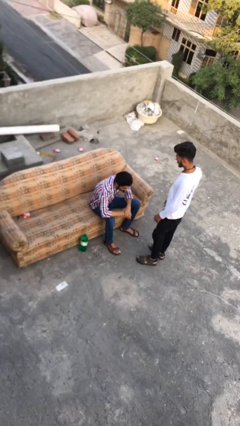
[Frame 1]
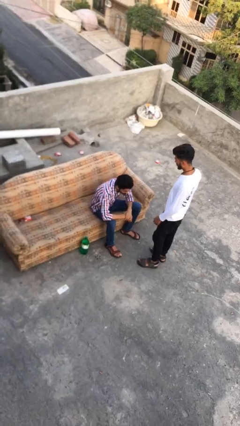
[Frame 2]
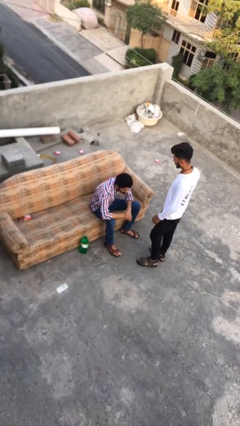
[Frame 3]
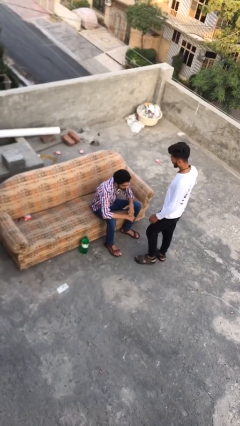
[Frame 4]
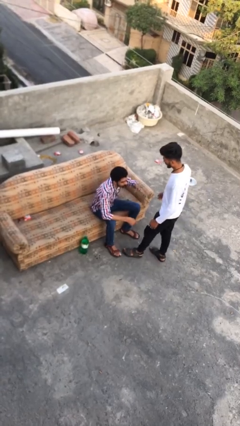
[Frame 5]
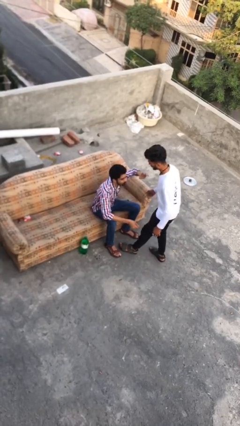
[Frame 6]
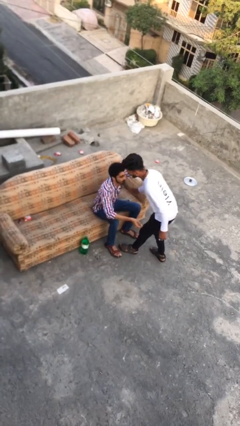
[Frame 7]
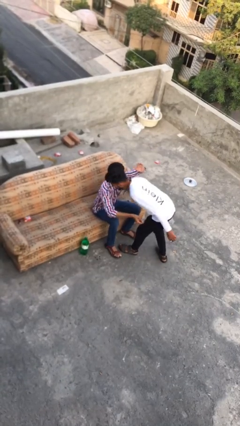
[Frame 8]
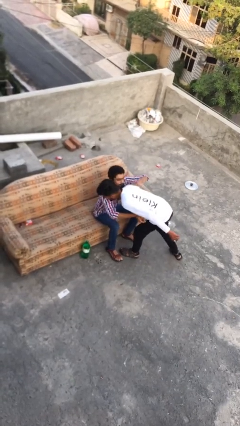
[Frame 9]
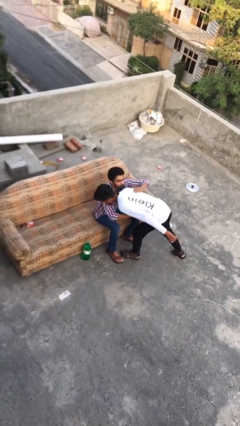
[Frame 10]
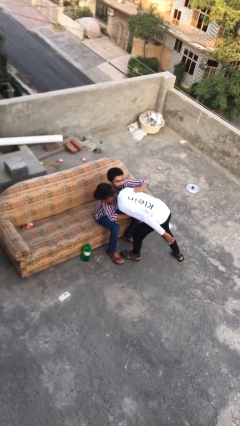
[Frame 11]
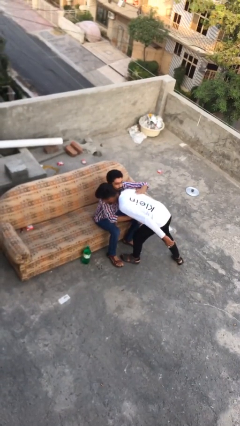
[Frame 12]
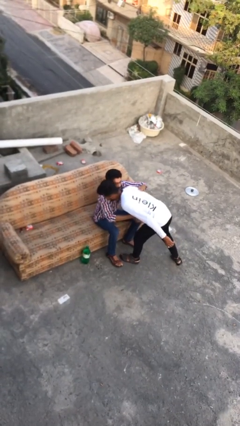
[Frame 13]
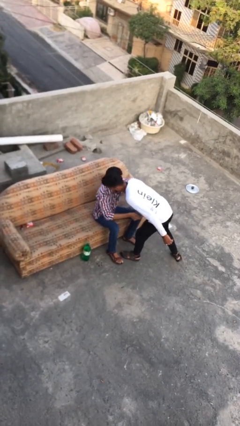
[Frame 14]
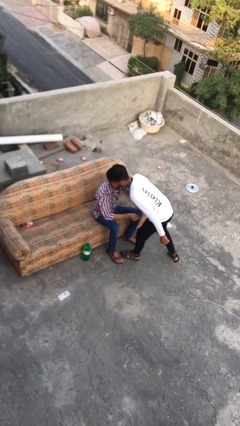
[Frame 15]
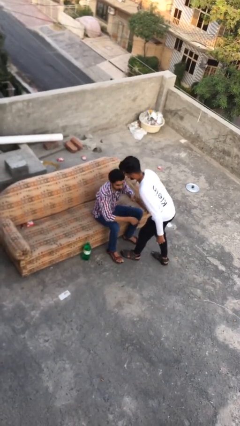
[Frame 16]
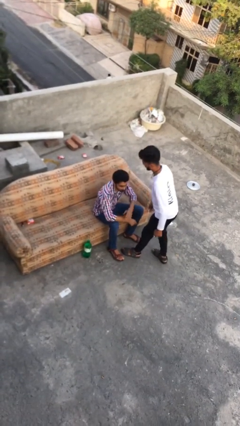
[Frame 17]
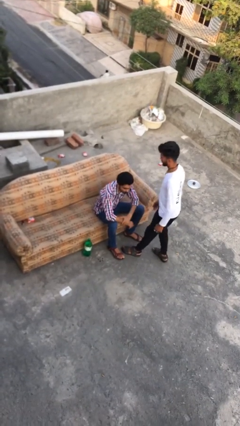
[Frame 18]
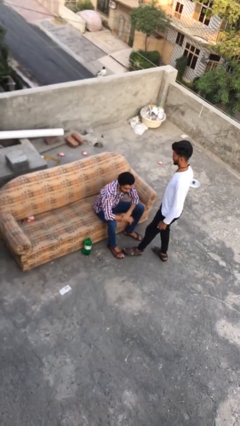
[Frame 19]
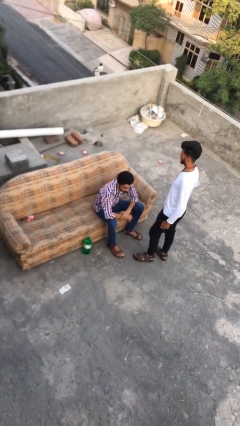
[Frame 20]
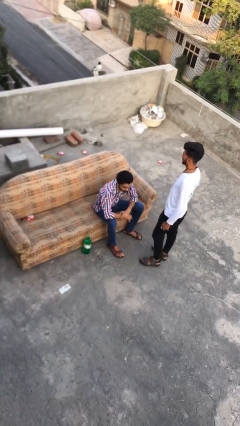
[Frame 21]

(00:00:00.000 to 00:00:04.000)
person embraces person

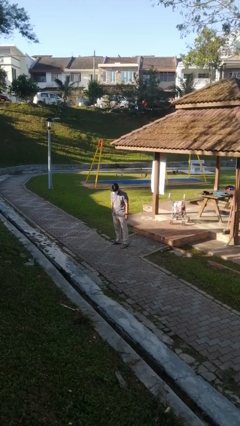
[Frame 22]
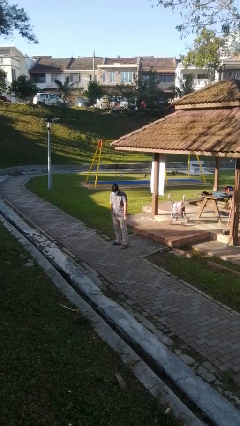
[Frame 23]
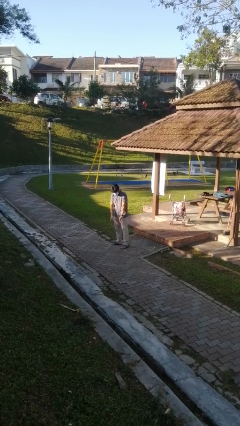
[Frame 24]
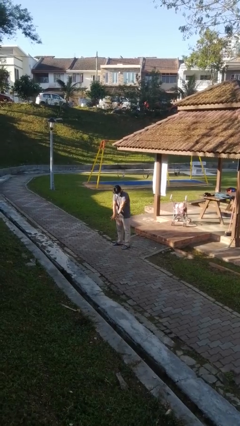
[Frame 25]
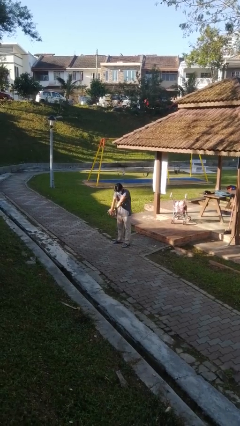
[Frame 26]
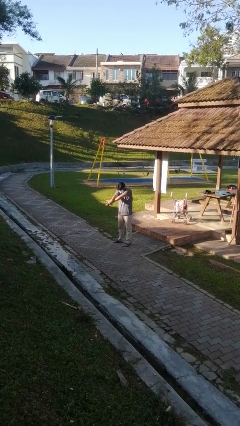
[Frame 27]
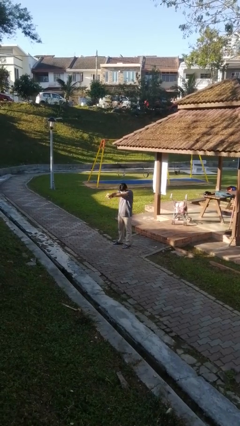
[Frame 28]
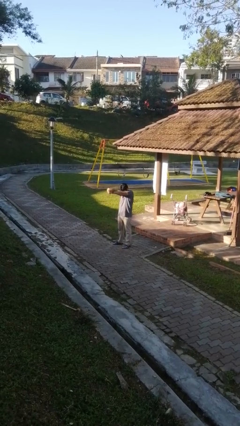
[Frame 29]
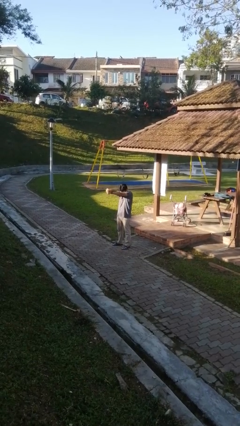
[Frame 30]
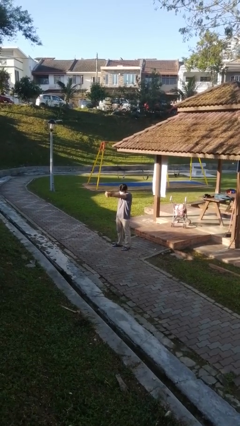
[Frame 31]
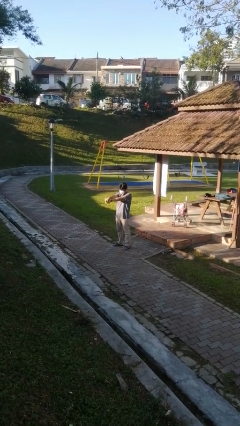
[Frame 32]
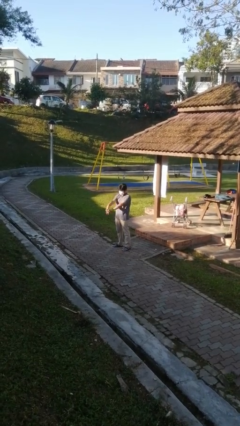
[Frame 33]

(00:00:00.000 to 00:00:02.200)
person crosses arms

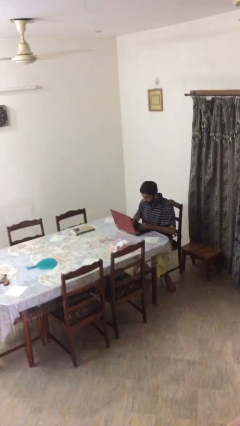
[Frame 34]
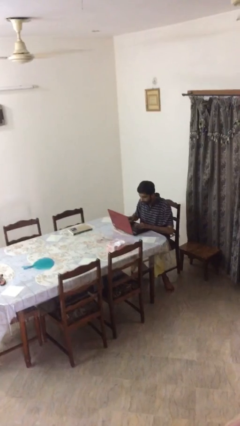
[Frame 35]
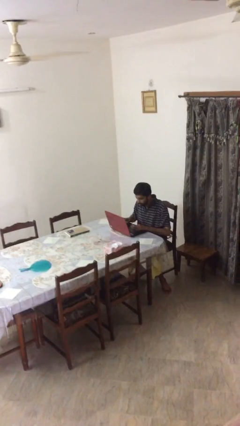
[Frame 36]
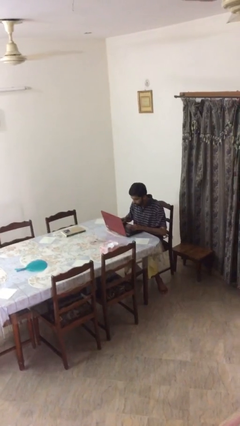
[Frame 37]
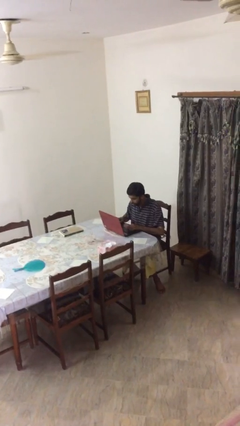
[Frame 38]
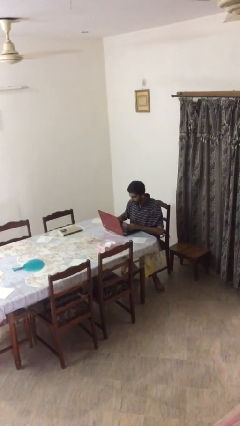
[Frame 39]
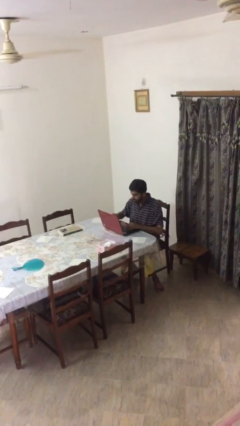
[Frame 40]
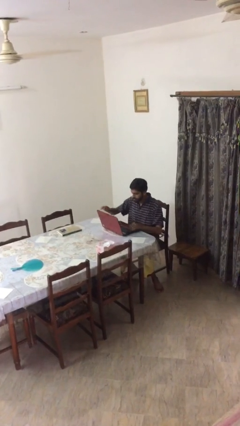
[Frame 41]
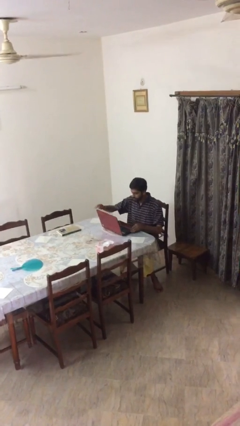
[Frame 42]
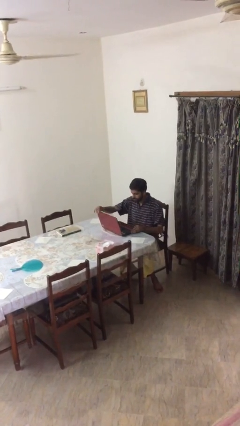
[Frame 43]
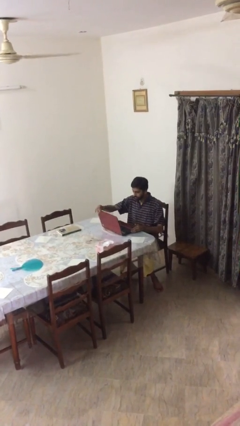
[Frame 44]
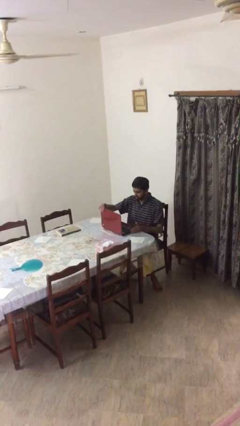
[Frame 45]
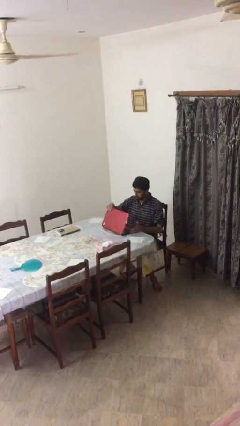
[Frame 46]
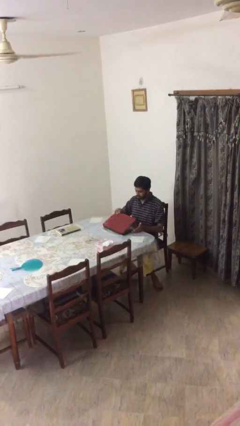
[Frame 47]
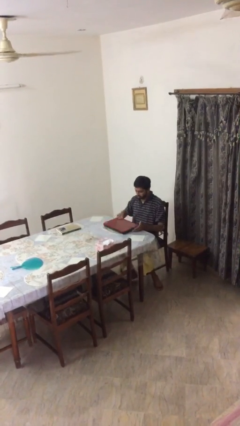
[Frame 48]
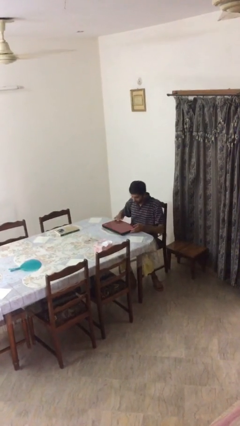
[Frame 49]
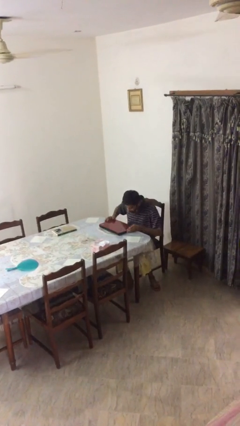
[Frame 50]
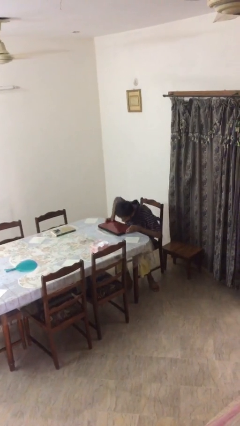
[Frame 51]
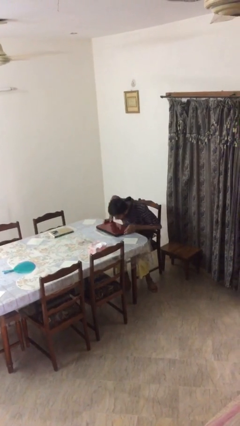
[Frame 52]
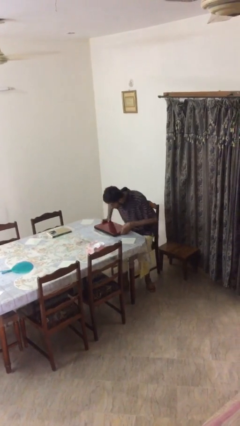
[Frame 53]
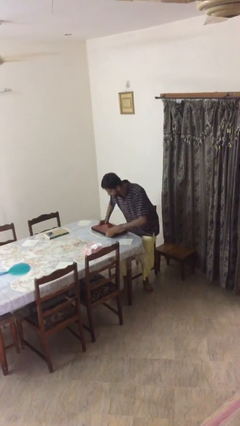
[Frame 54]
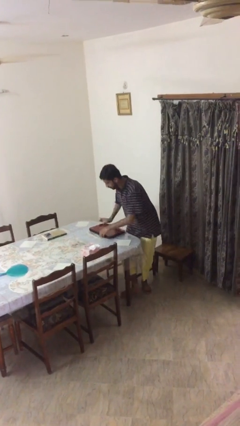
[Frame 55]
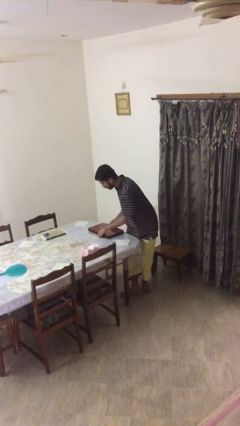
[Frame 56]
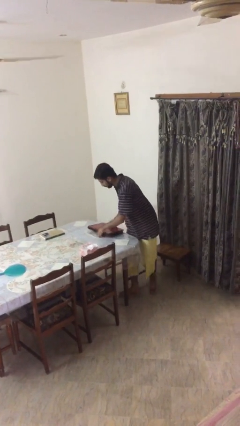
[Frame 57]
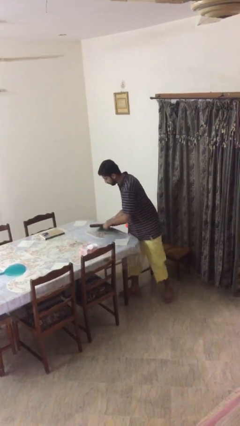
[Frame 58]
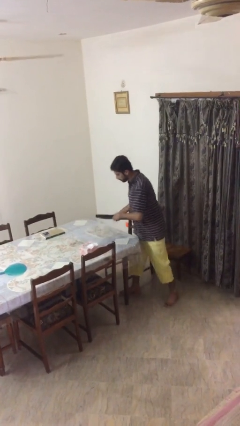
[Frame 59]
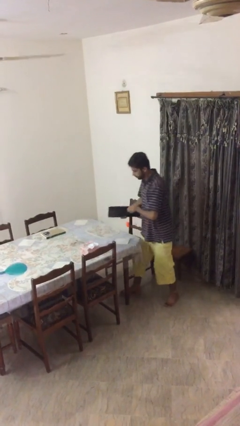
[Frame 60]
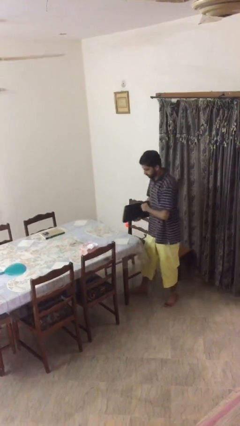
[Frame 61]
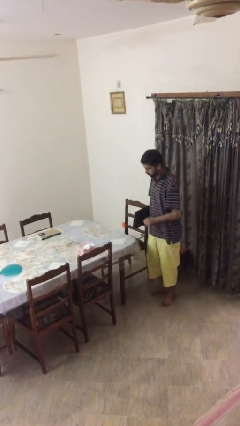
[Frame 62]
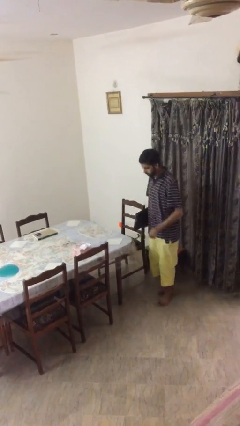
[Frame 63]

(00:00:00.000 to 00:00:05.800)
person stands up

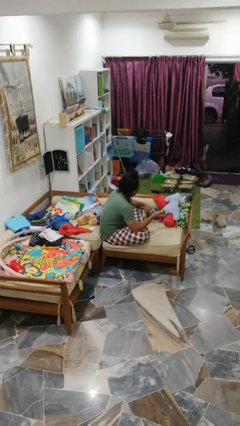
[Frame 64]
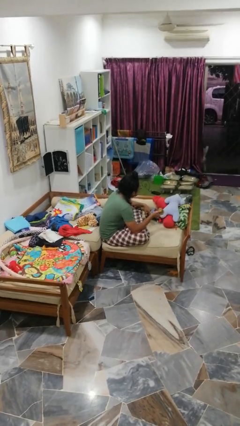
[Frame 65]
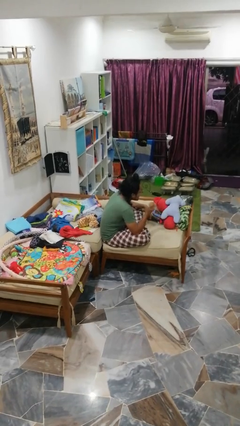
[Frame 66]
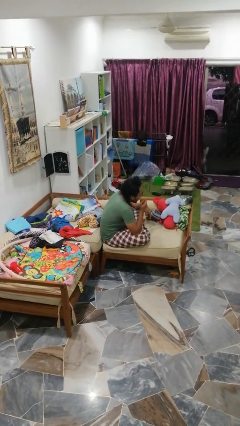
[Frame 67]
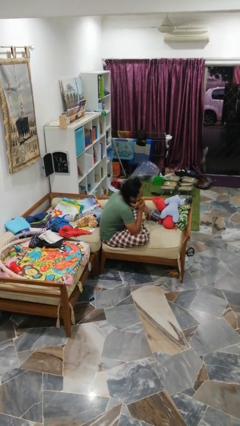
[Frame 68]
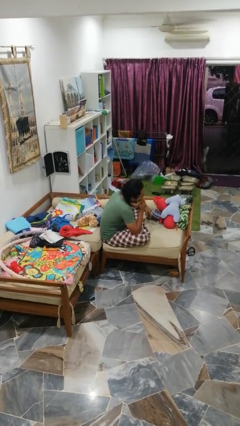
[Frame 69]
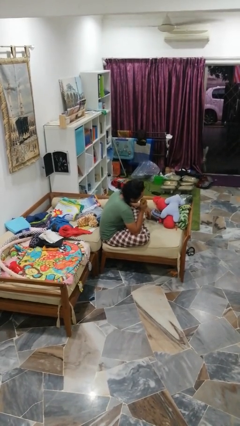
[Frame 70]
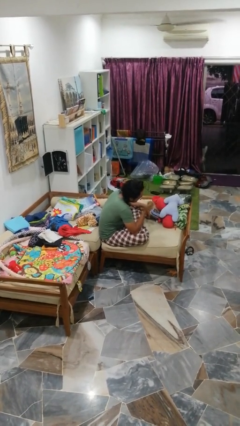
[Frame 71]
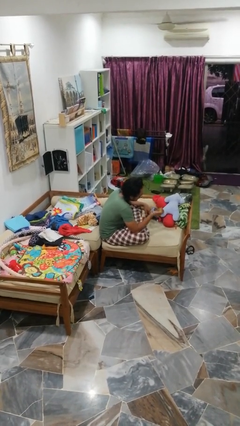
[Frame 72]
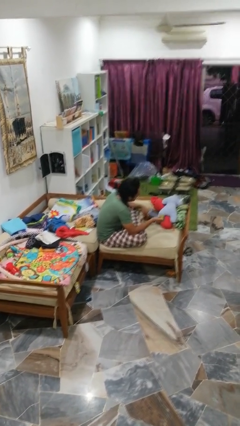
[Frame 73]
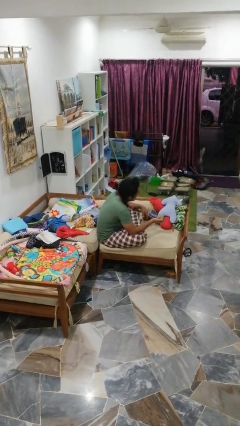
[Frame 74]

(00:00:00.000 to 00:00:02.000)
person eats apple

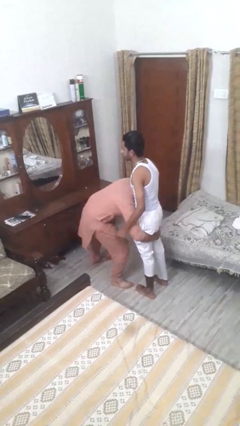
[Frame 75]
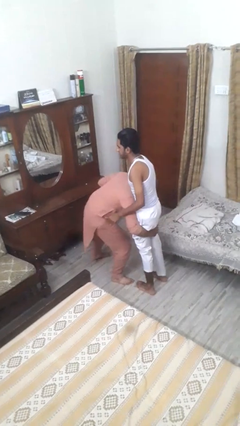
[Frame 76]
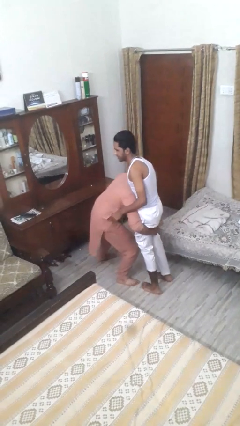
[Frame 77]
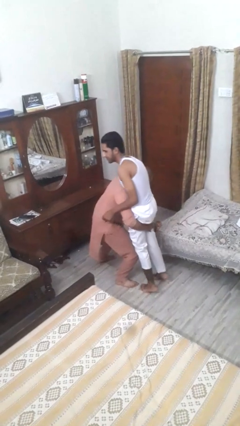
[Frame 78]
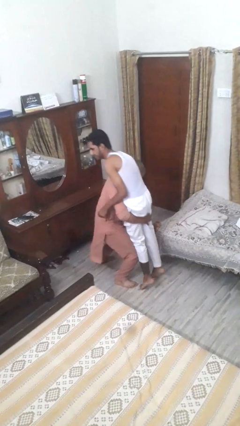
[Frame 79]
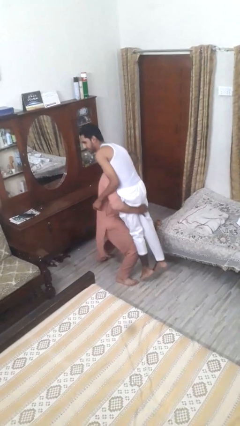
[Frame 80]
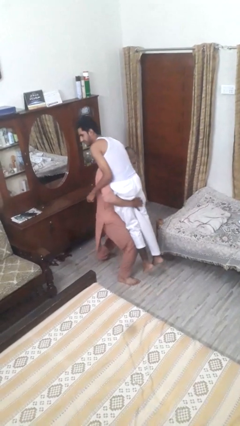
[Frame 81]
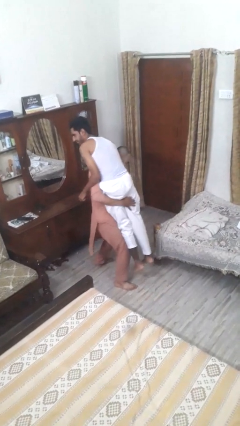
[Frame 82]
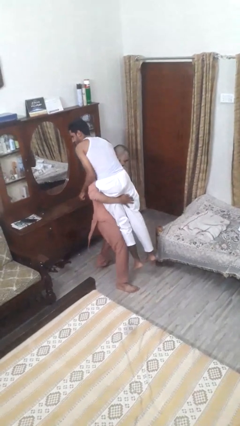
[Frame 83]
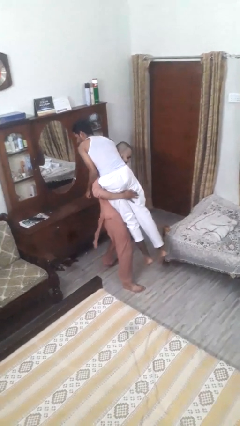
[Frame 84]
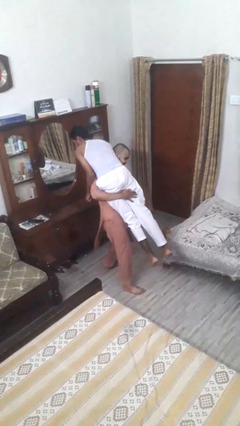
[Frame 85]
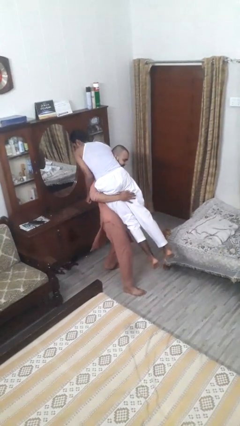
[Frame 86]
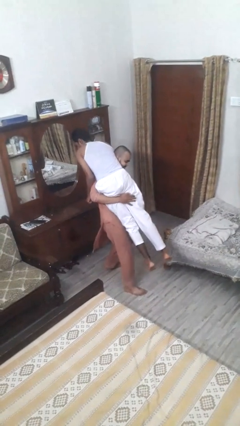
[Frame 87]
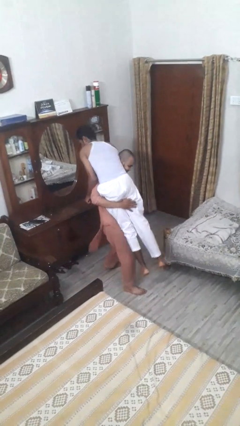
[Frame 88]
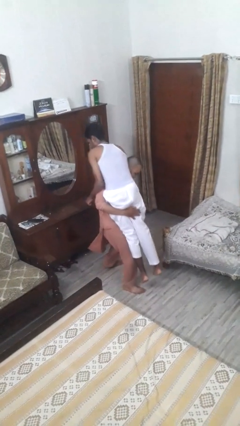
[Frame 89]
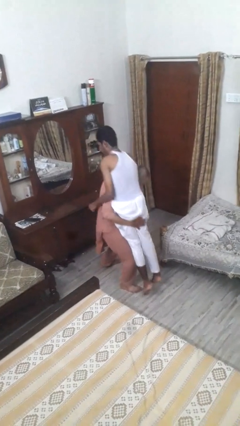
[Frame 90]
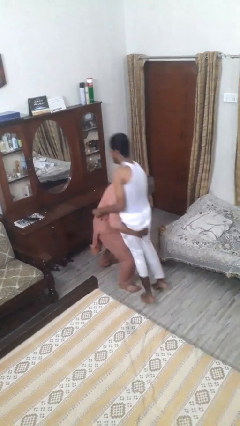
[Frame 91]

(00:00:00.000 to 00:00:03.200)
person carries person over shoulder

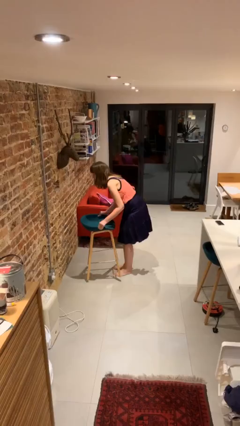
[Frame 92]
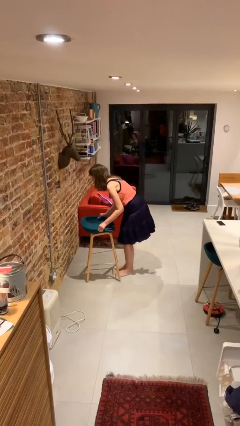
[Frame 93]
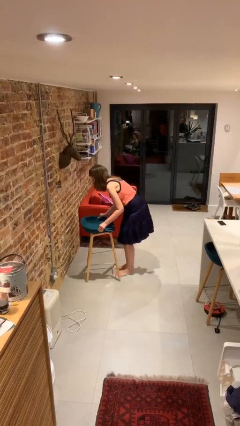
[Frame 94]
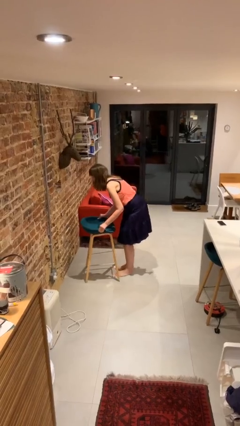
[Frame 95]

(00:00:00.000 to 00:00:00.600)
person puts down object on floor
